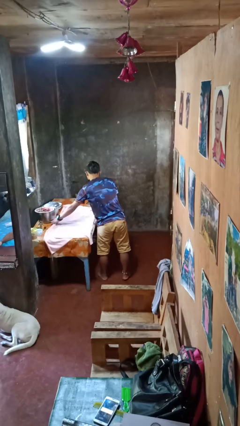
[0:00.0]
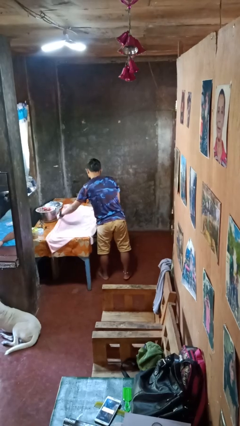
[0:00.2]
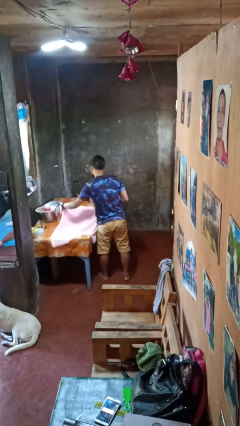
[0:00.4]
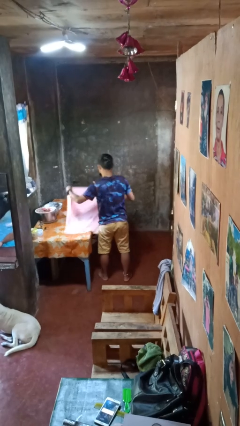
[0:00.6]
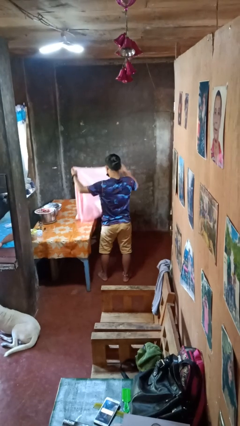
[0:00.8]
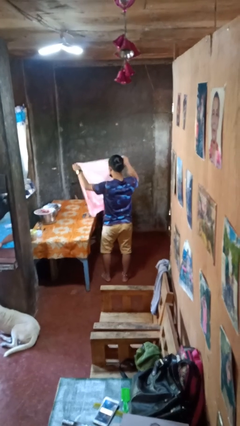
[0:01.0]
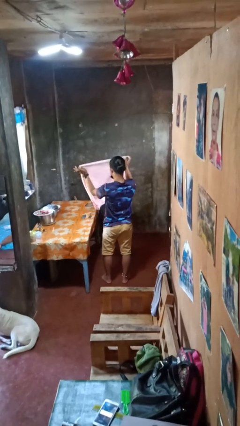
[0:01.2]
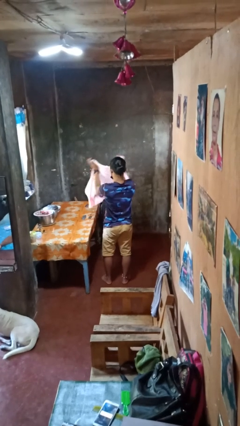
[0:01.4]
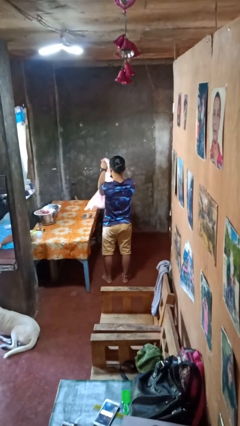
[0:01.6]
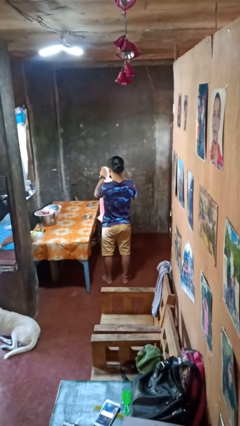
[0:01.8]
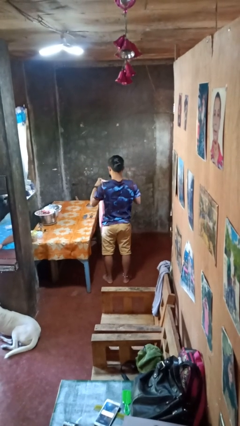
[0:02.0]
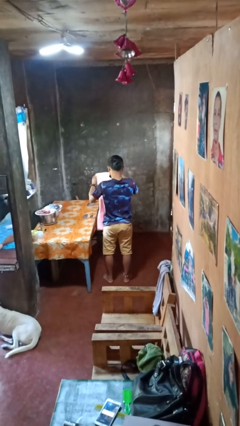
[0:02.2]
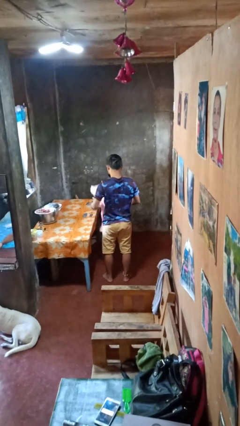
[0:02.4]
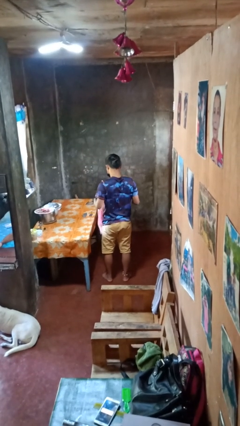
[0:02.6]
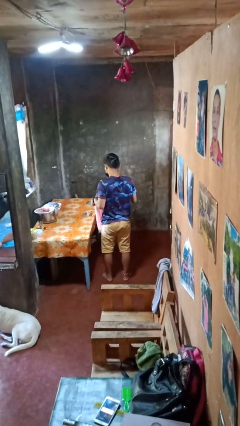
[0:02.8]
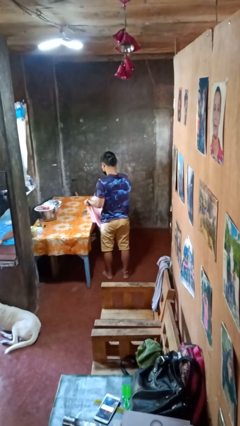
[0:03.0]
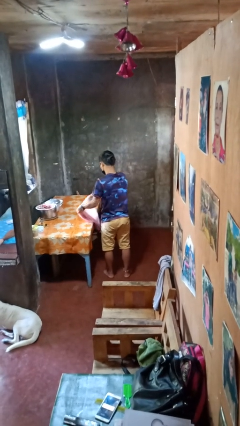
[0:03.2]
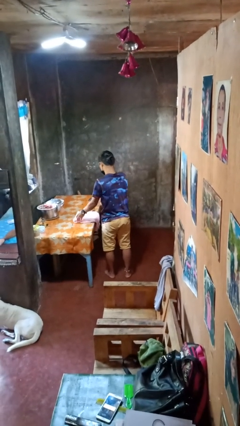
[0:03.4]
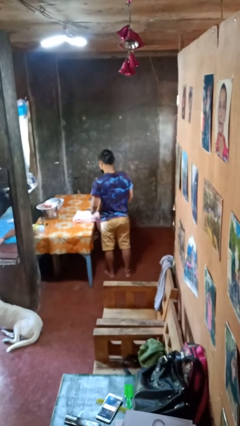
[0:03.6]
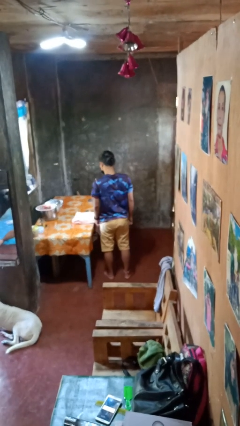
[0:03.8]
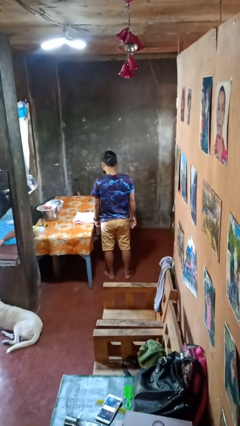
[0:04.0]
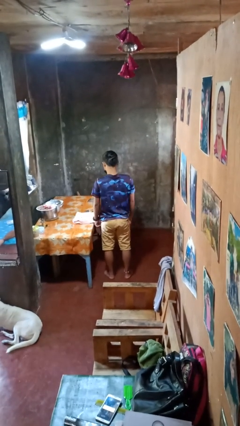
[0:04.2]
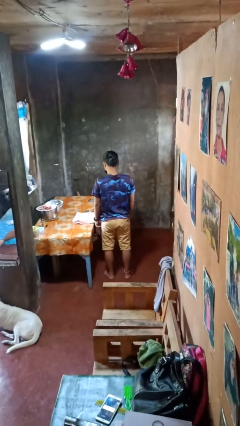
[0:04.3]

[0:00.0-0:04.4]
person folds tablecloth

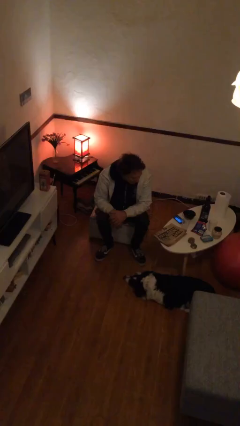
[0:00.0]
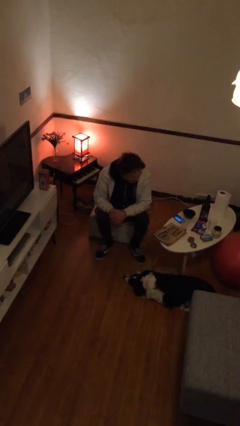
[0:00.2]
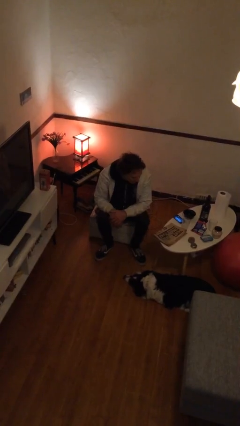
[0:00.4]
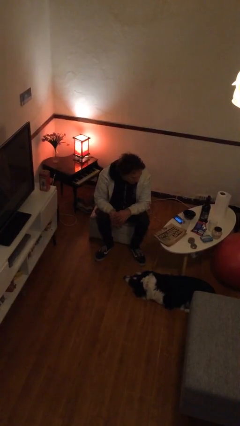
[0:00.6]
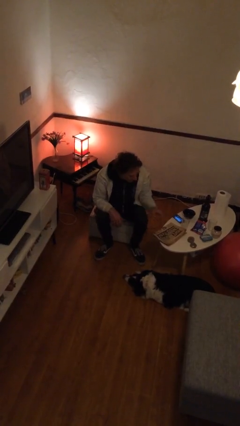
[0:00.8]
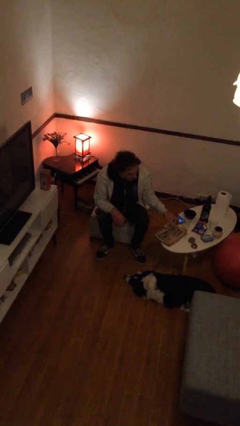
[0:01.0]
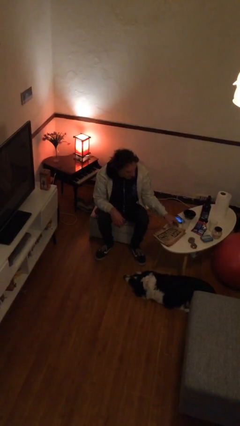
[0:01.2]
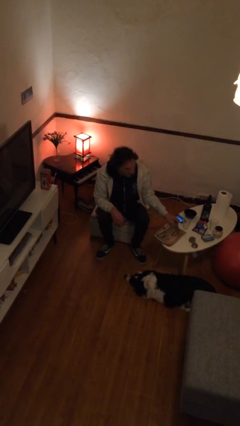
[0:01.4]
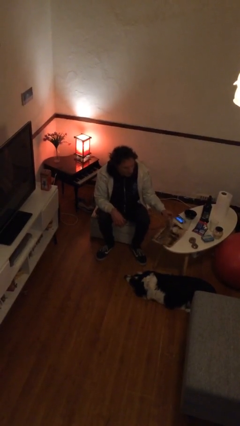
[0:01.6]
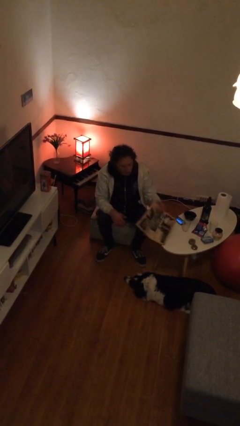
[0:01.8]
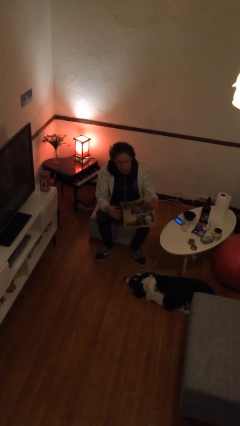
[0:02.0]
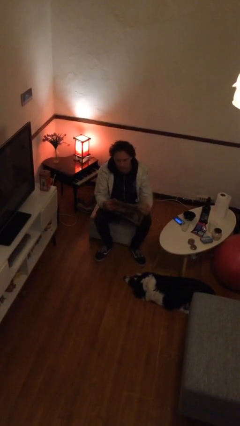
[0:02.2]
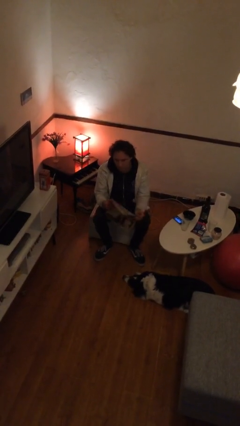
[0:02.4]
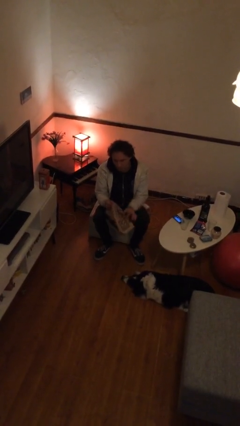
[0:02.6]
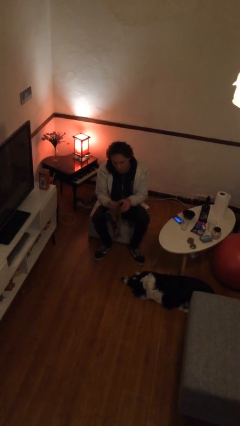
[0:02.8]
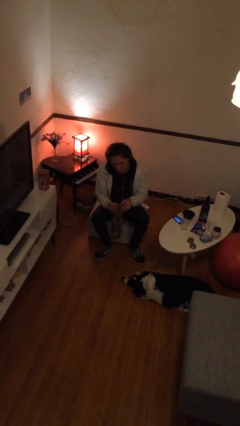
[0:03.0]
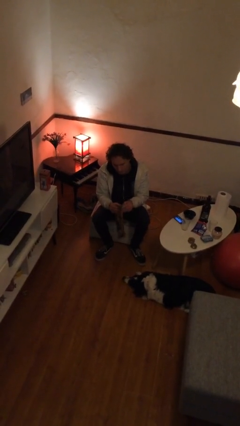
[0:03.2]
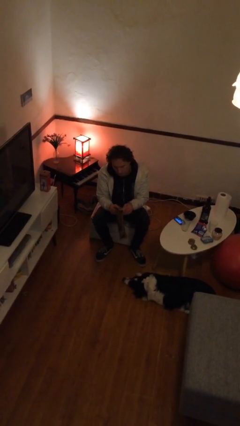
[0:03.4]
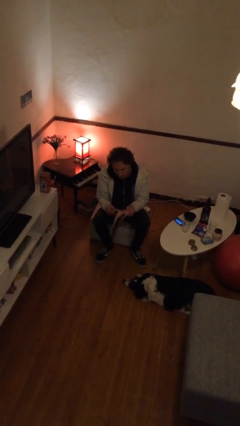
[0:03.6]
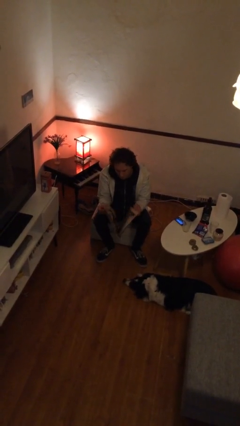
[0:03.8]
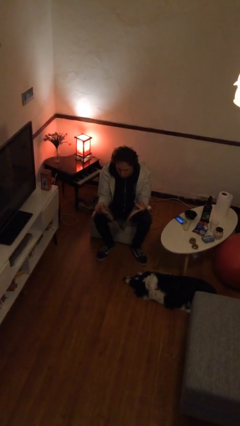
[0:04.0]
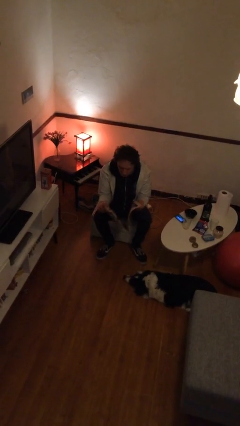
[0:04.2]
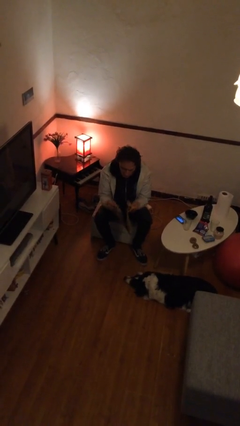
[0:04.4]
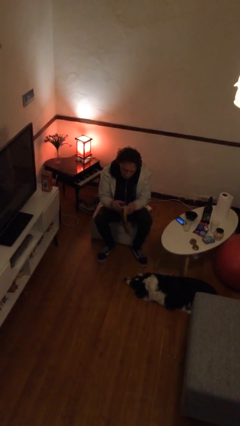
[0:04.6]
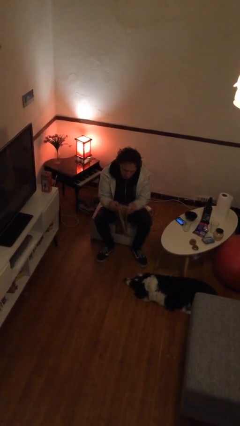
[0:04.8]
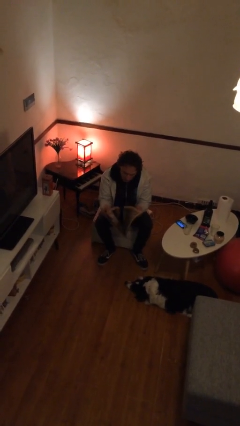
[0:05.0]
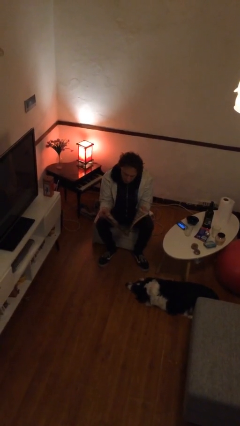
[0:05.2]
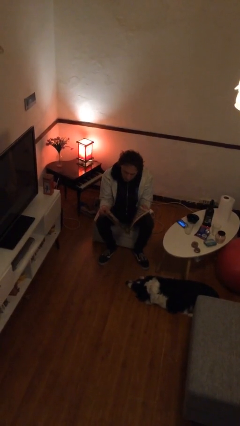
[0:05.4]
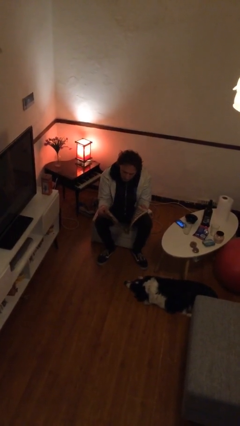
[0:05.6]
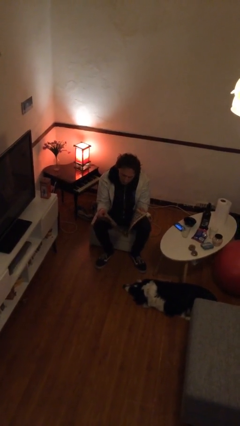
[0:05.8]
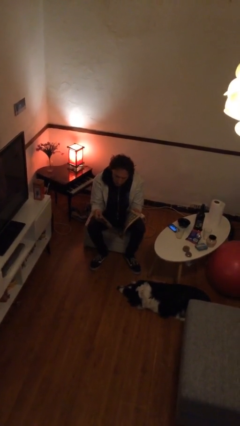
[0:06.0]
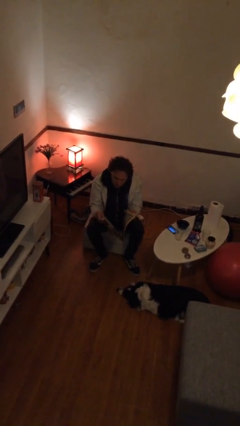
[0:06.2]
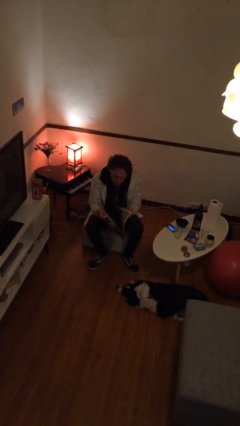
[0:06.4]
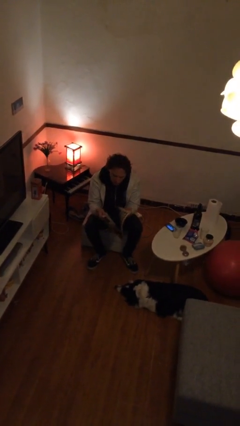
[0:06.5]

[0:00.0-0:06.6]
person reads newspaper

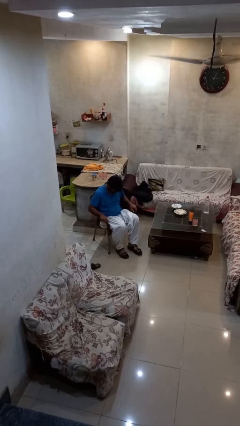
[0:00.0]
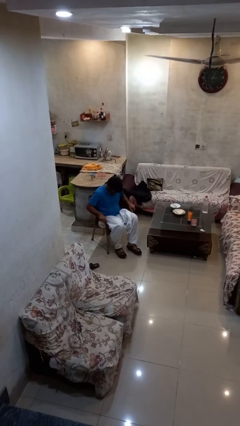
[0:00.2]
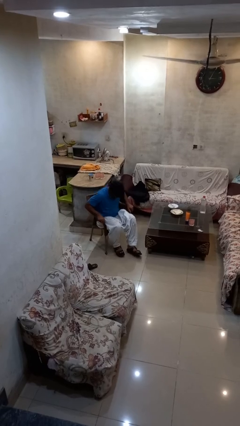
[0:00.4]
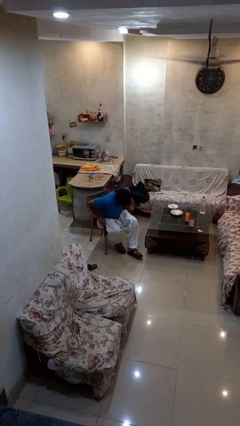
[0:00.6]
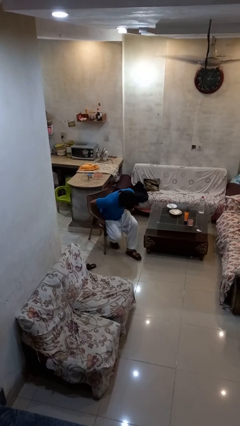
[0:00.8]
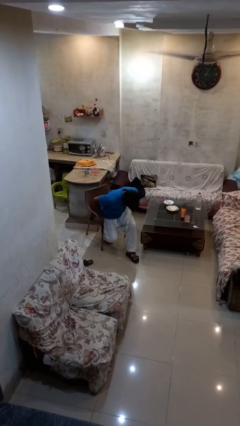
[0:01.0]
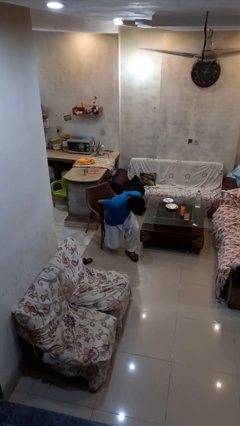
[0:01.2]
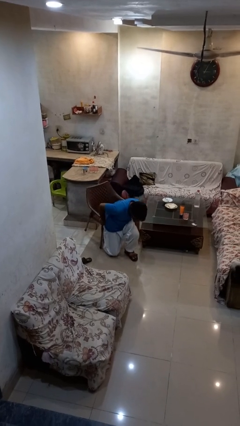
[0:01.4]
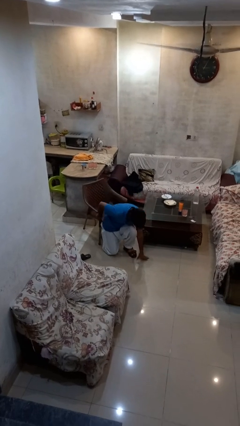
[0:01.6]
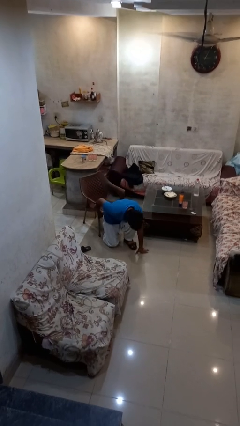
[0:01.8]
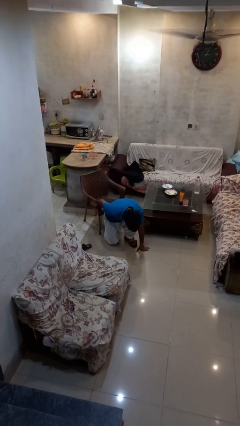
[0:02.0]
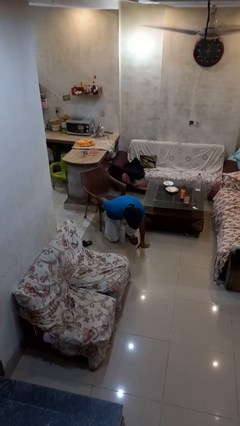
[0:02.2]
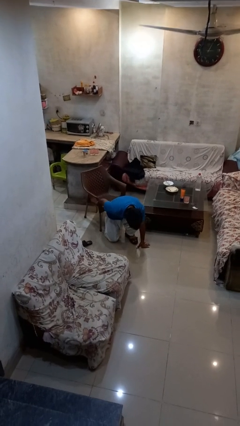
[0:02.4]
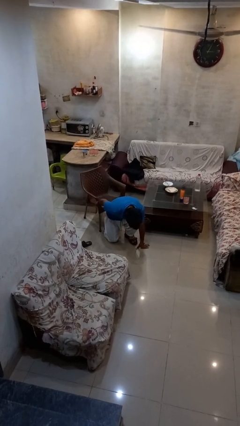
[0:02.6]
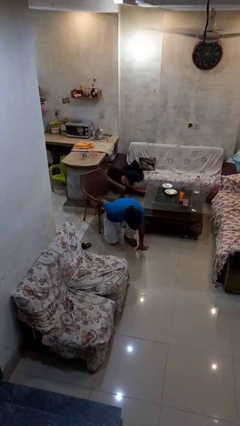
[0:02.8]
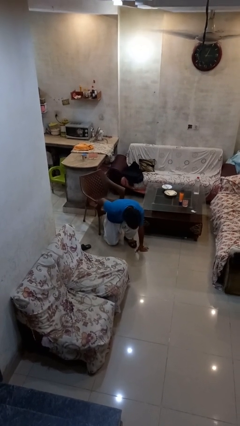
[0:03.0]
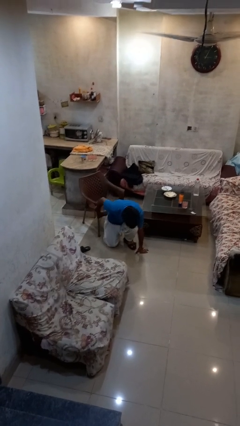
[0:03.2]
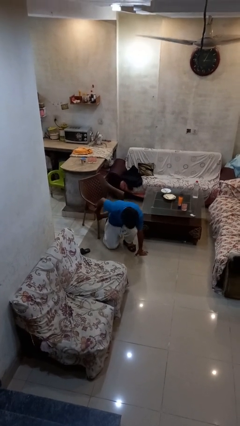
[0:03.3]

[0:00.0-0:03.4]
person falls from chair

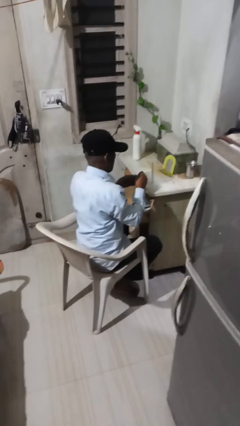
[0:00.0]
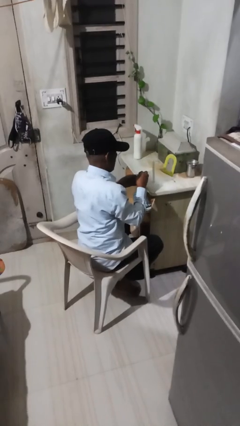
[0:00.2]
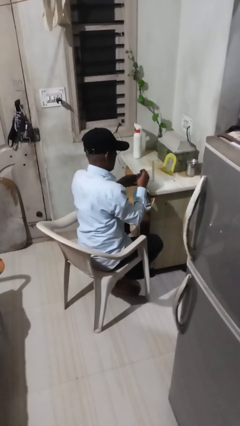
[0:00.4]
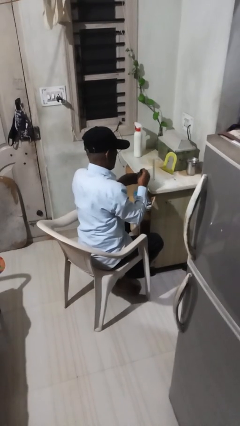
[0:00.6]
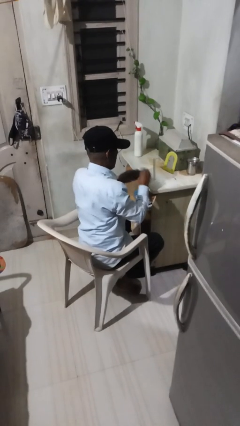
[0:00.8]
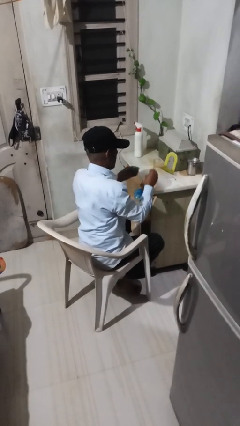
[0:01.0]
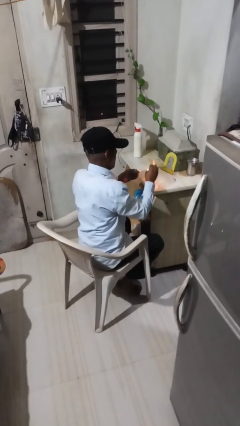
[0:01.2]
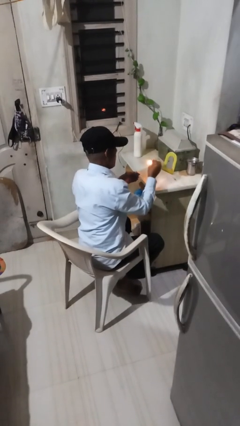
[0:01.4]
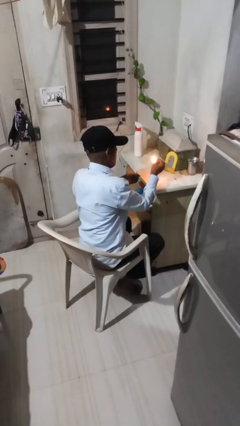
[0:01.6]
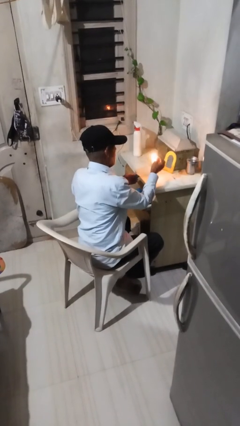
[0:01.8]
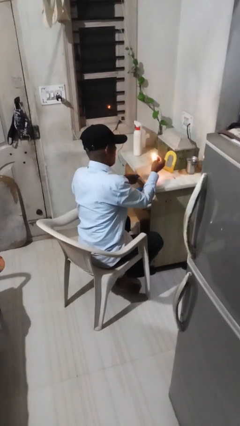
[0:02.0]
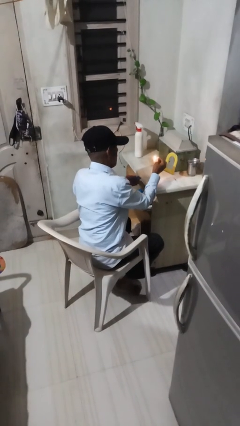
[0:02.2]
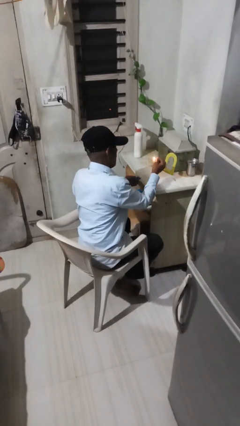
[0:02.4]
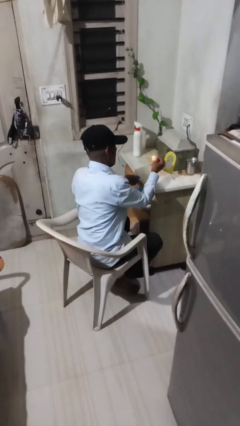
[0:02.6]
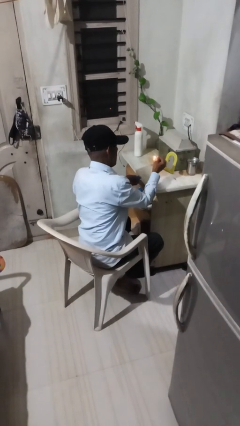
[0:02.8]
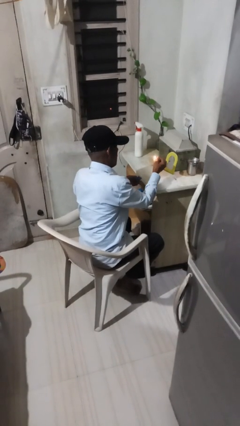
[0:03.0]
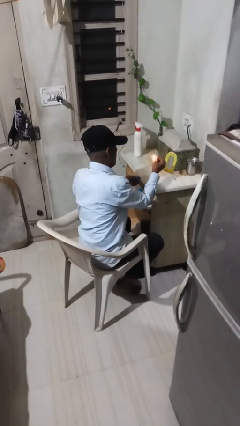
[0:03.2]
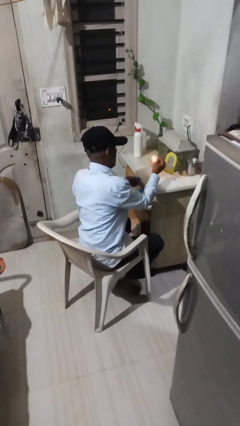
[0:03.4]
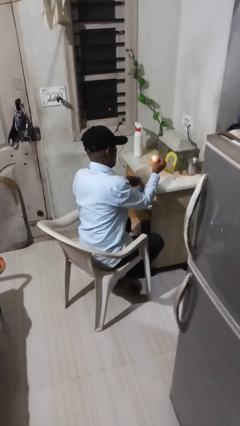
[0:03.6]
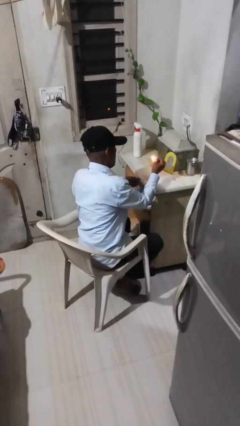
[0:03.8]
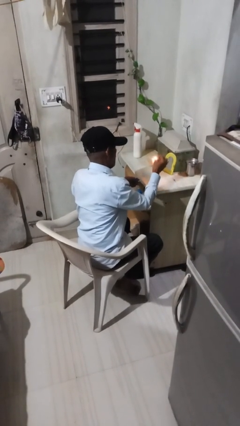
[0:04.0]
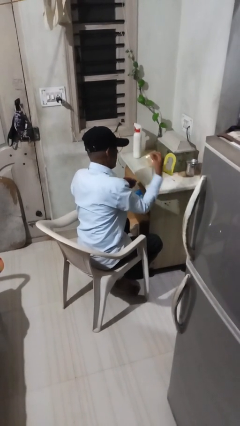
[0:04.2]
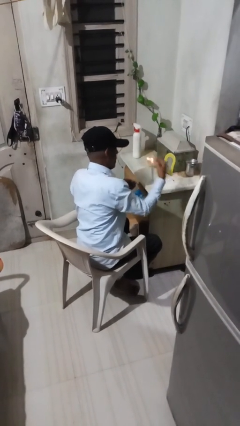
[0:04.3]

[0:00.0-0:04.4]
person lights candle
